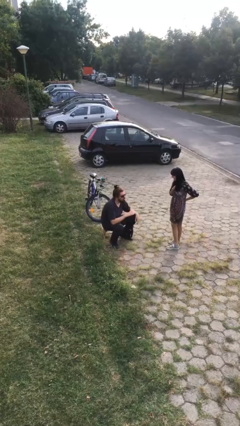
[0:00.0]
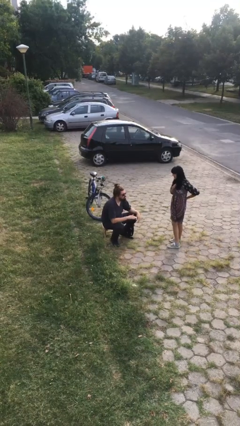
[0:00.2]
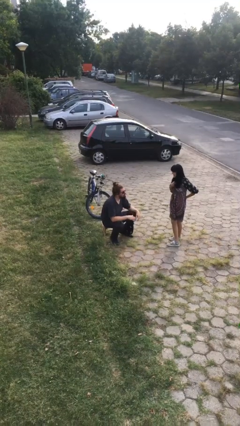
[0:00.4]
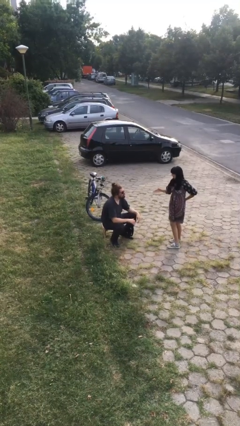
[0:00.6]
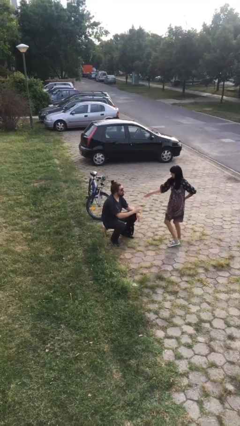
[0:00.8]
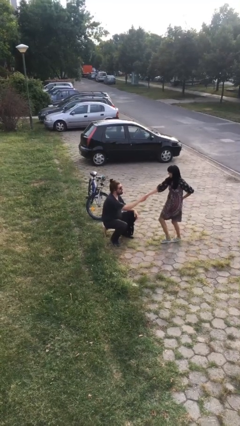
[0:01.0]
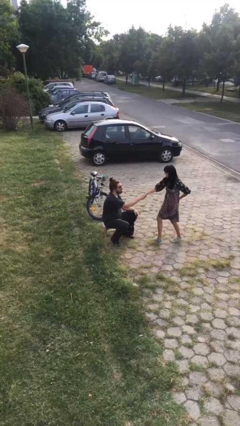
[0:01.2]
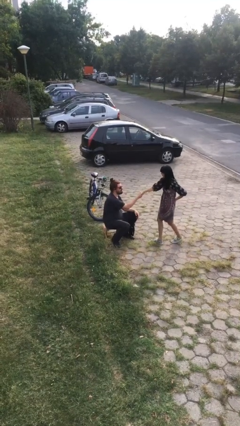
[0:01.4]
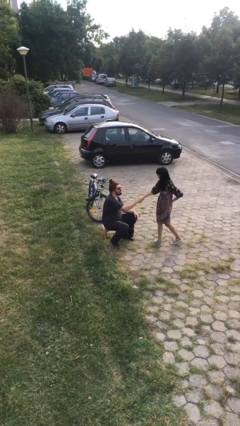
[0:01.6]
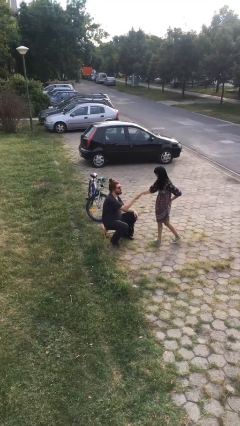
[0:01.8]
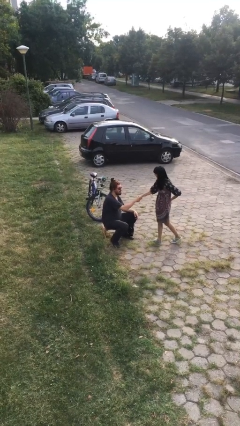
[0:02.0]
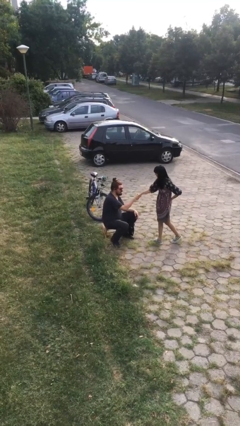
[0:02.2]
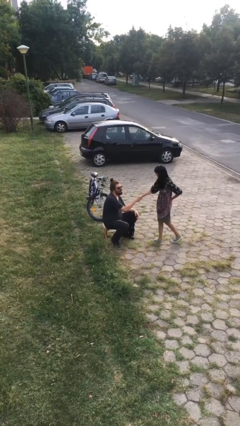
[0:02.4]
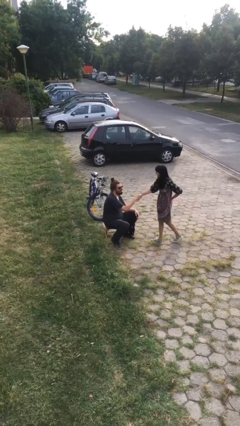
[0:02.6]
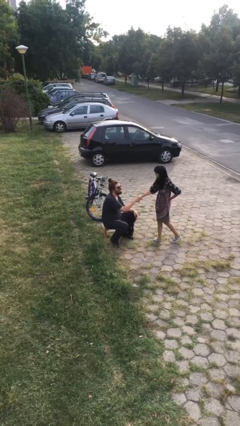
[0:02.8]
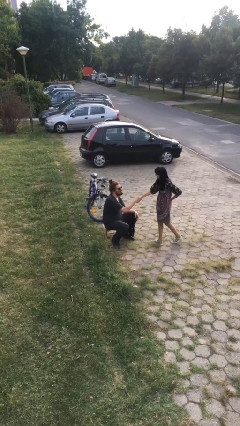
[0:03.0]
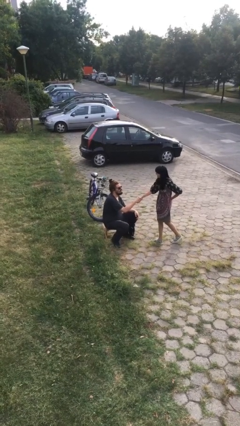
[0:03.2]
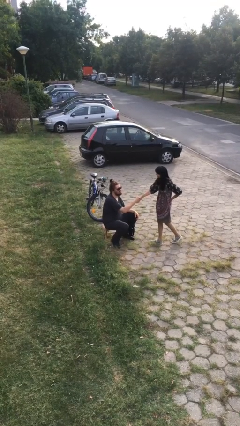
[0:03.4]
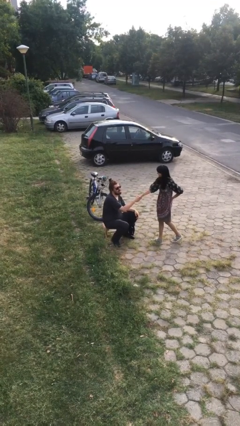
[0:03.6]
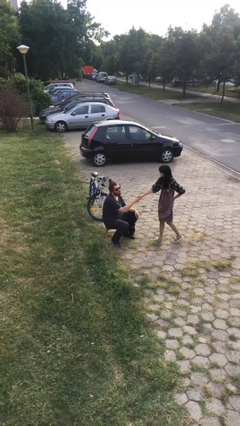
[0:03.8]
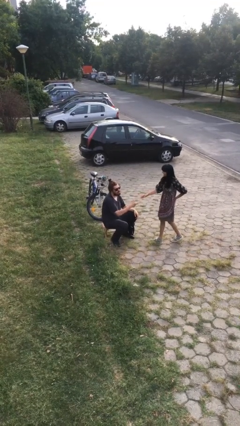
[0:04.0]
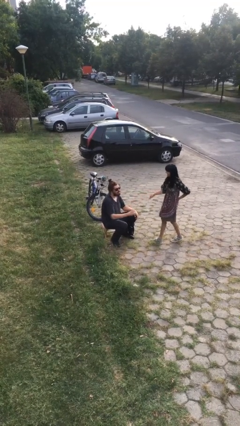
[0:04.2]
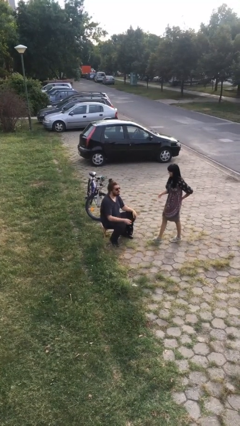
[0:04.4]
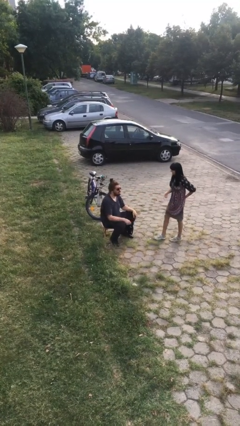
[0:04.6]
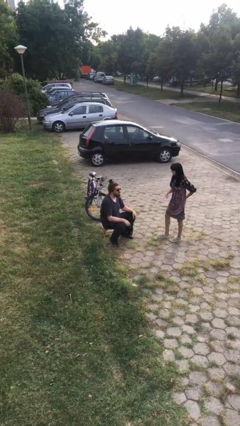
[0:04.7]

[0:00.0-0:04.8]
person shakes hand

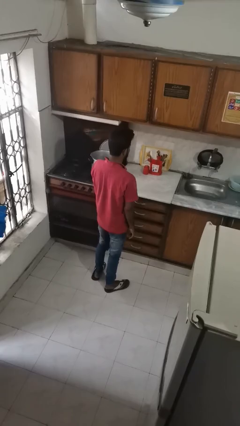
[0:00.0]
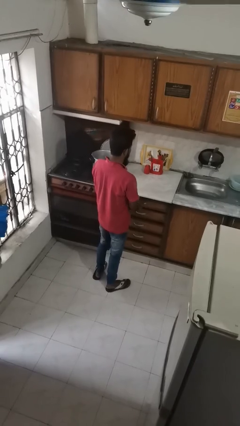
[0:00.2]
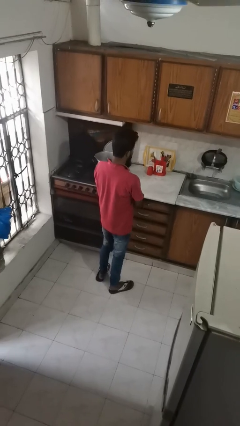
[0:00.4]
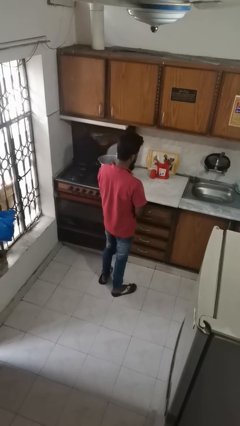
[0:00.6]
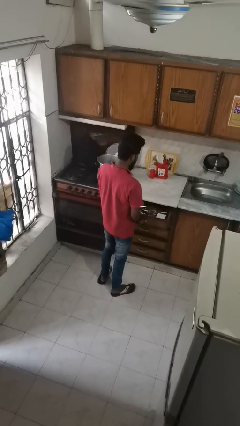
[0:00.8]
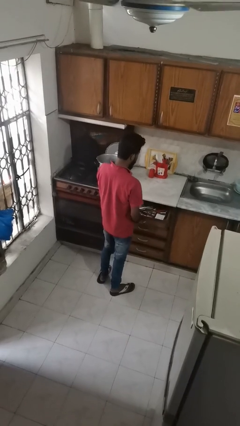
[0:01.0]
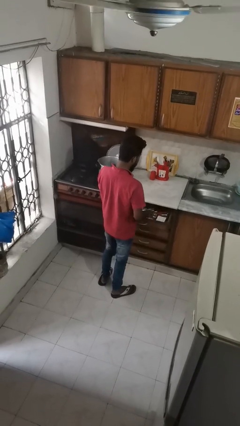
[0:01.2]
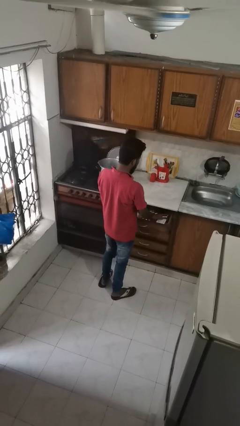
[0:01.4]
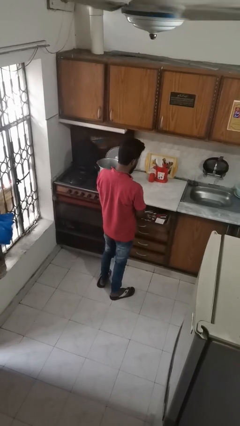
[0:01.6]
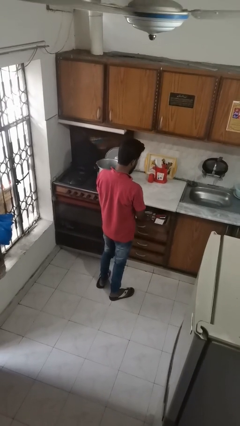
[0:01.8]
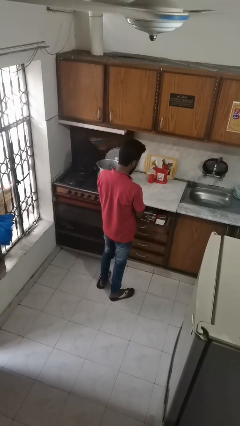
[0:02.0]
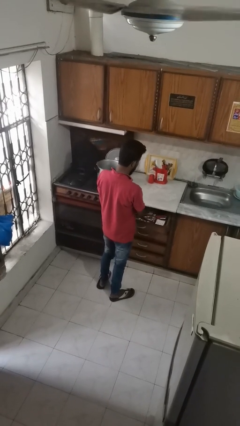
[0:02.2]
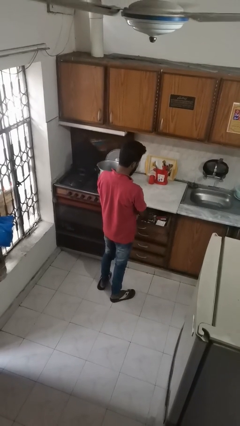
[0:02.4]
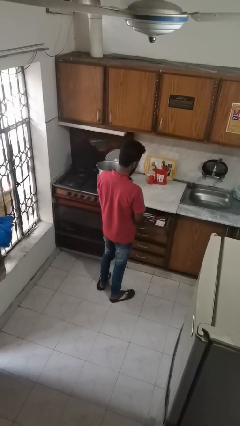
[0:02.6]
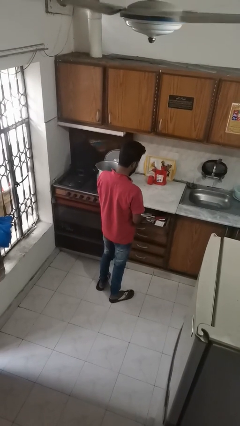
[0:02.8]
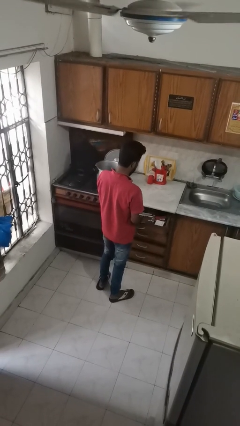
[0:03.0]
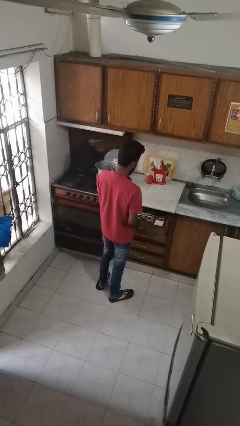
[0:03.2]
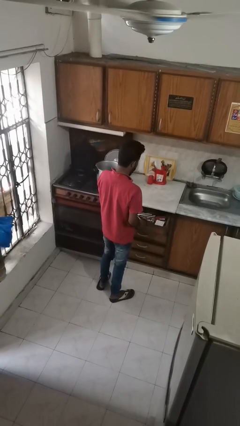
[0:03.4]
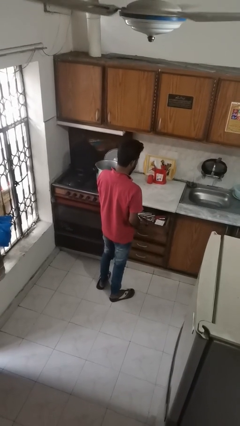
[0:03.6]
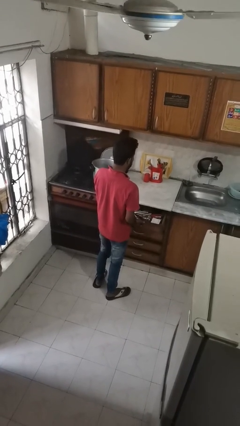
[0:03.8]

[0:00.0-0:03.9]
person searches in kitchen drawer

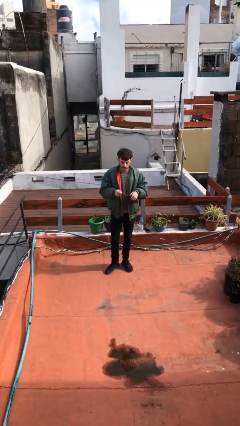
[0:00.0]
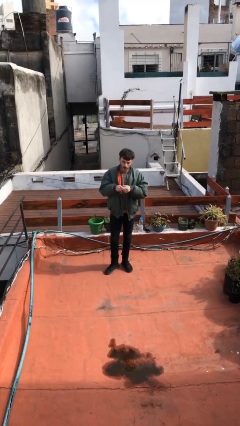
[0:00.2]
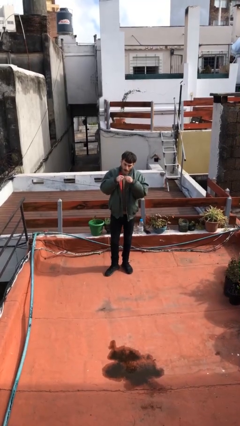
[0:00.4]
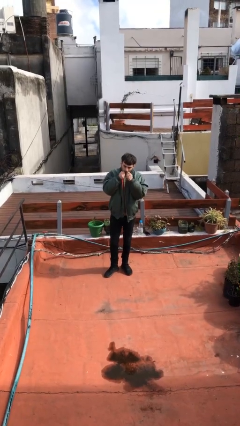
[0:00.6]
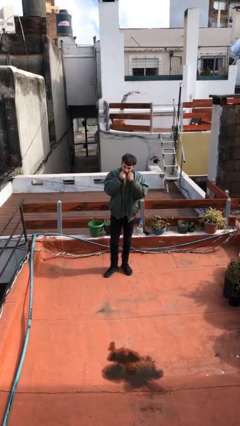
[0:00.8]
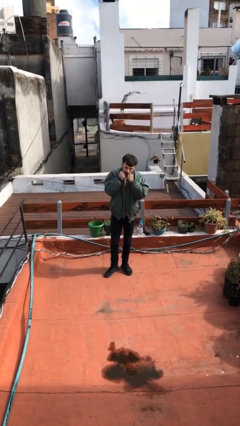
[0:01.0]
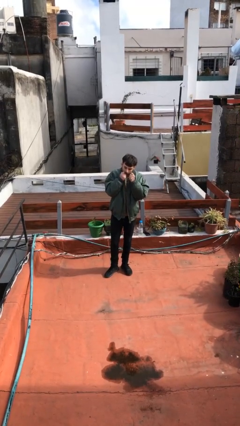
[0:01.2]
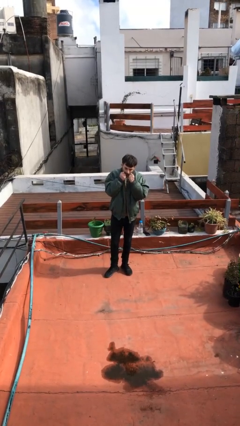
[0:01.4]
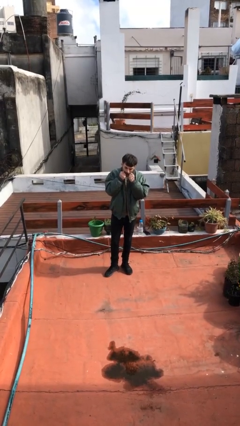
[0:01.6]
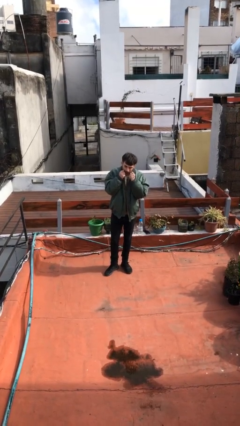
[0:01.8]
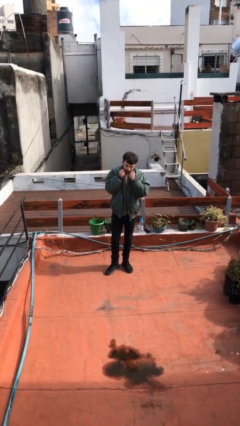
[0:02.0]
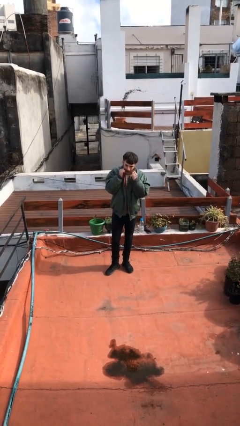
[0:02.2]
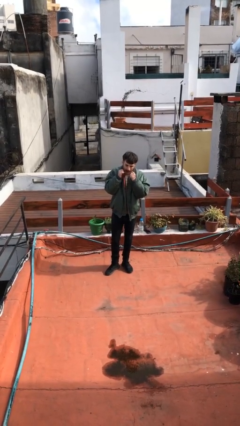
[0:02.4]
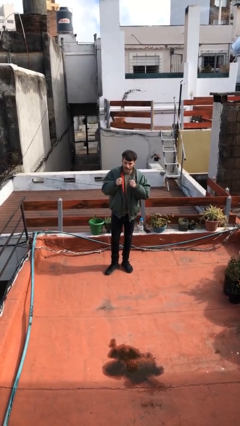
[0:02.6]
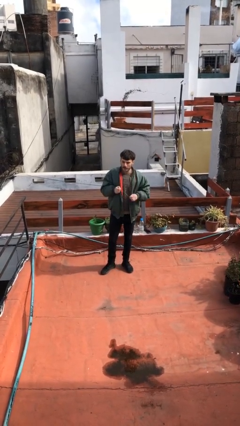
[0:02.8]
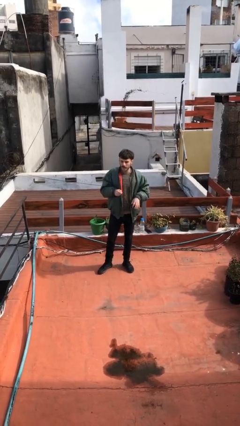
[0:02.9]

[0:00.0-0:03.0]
person flosses

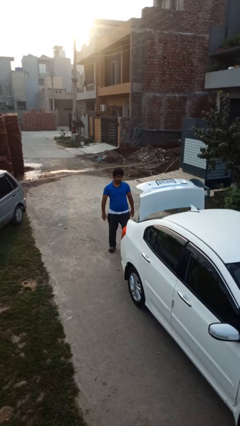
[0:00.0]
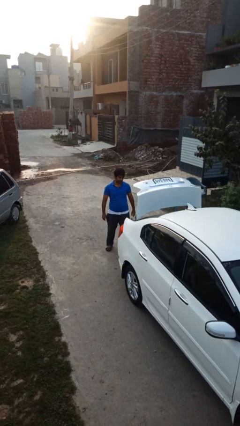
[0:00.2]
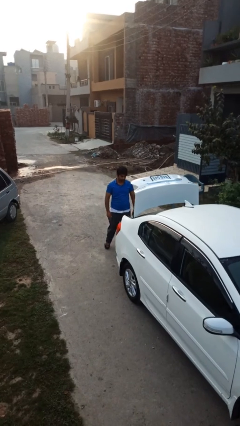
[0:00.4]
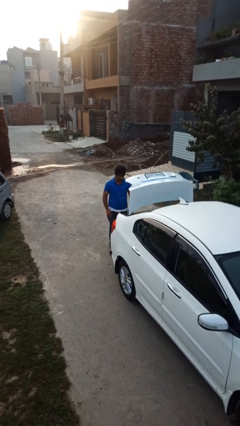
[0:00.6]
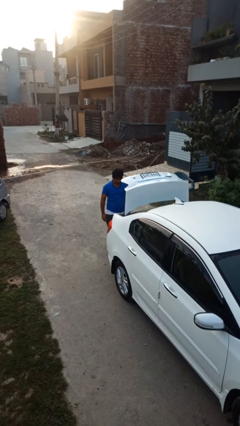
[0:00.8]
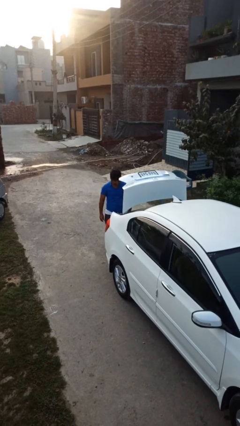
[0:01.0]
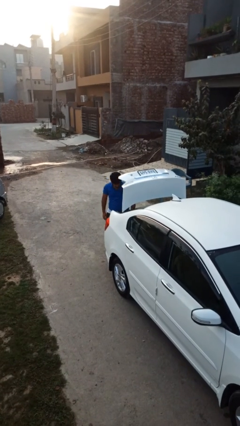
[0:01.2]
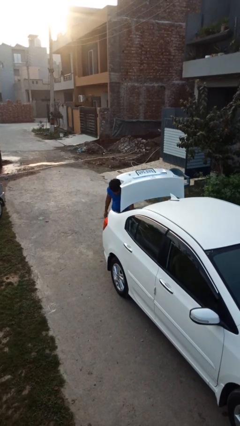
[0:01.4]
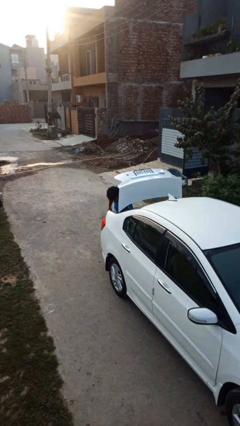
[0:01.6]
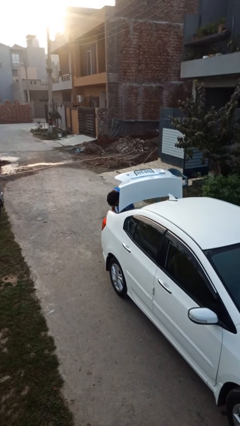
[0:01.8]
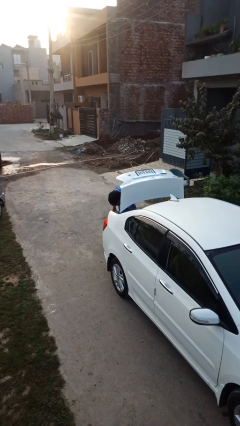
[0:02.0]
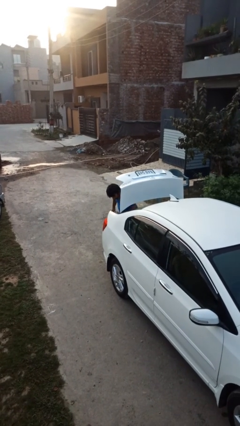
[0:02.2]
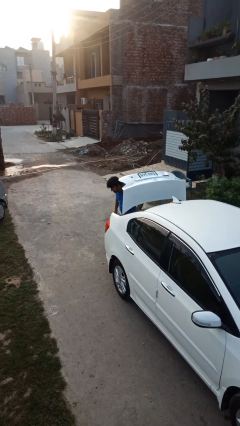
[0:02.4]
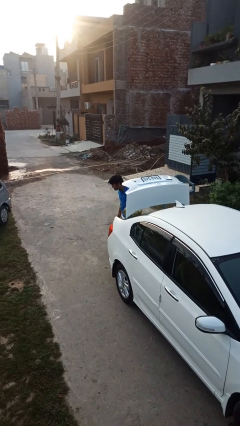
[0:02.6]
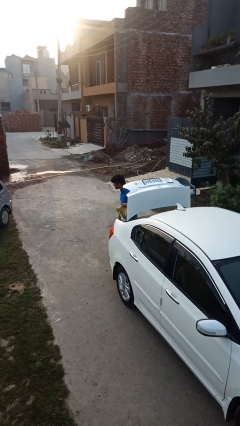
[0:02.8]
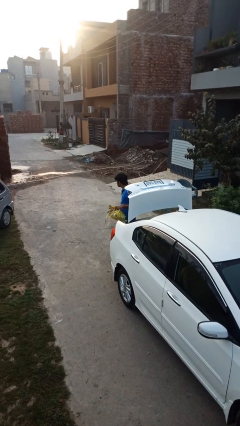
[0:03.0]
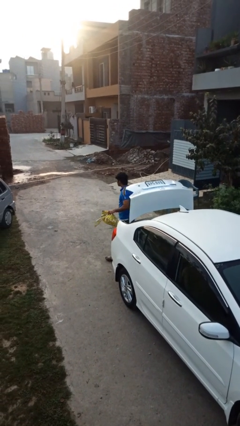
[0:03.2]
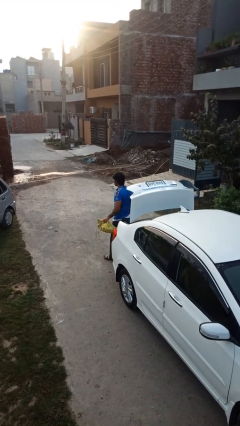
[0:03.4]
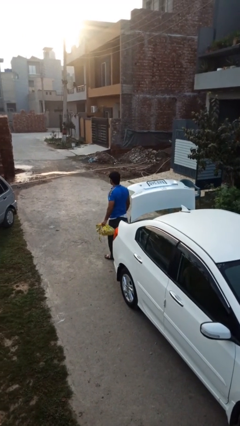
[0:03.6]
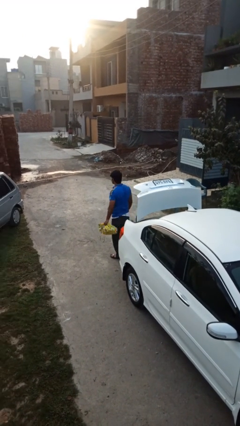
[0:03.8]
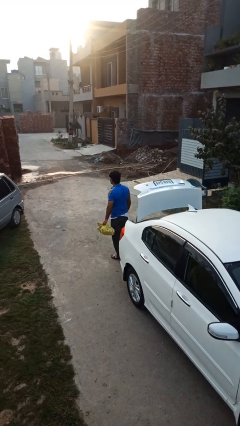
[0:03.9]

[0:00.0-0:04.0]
person unloads car

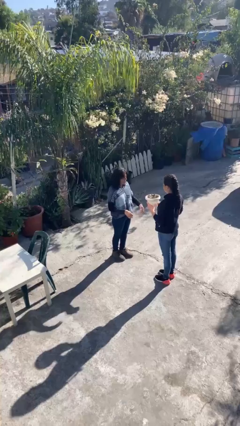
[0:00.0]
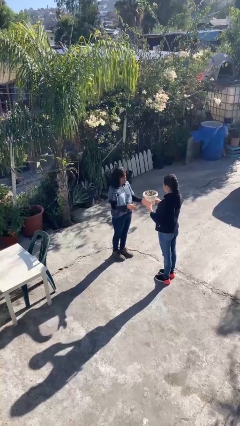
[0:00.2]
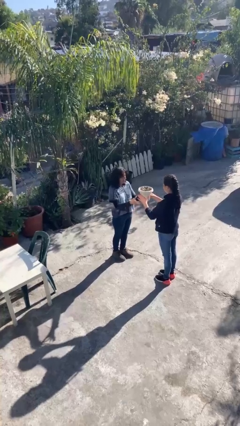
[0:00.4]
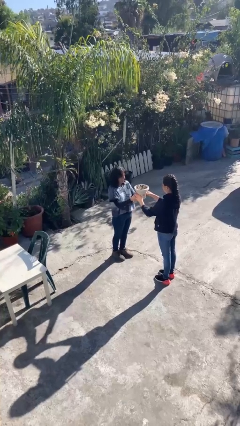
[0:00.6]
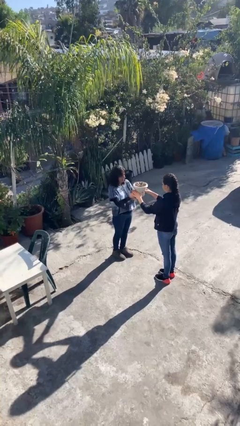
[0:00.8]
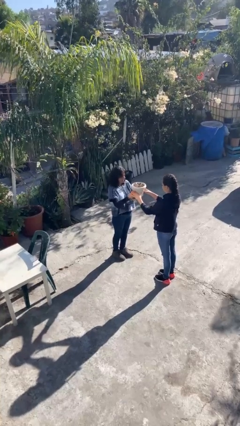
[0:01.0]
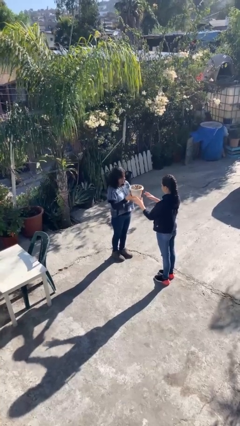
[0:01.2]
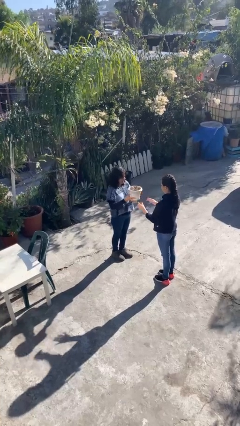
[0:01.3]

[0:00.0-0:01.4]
person transfers object to person

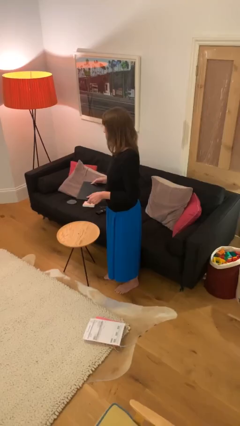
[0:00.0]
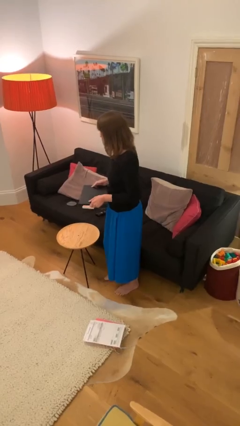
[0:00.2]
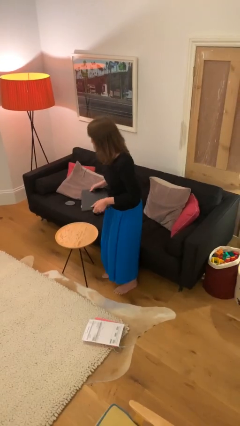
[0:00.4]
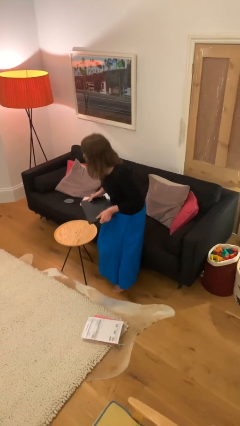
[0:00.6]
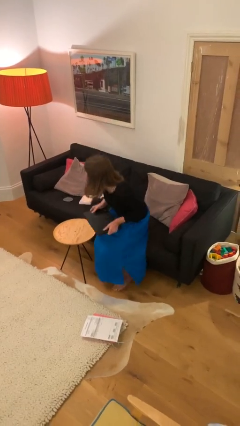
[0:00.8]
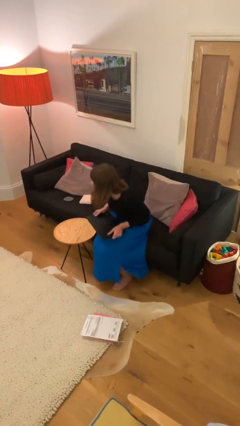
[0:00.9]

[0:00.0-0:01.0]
person sits down
